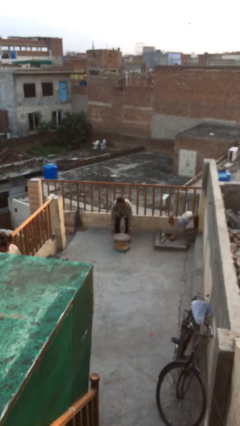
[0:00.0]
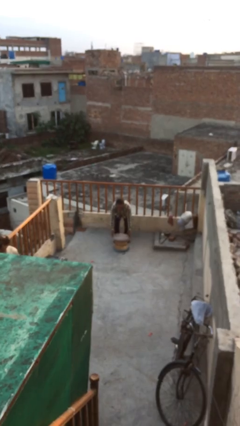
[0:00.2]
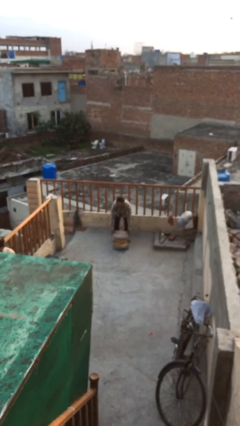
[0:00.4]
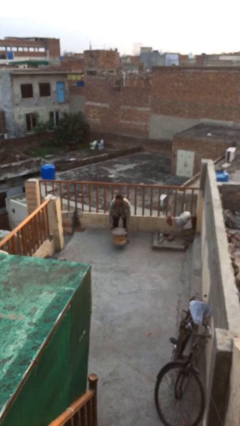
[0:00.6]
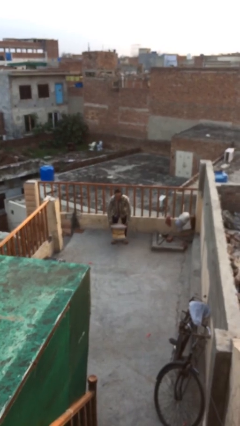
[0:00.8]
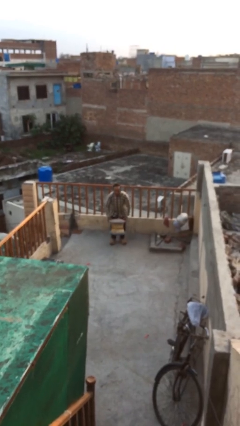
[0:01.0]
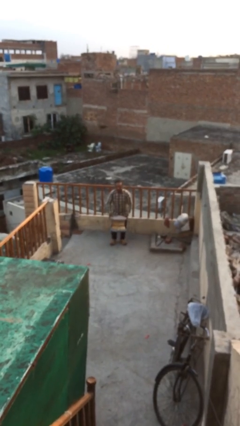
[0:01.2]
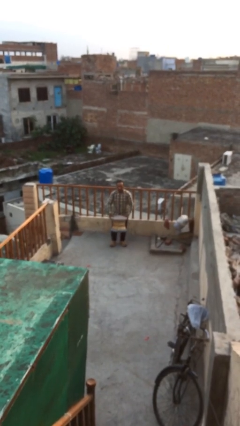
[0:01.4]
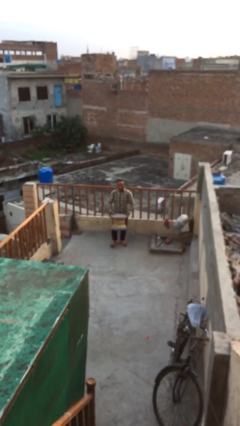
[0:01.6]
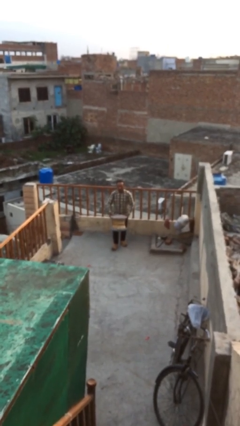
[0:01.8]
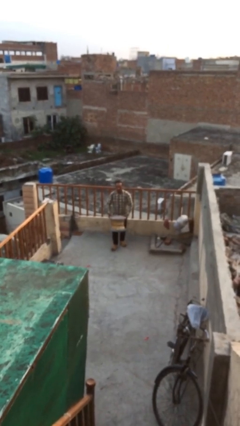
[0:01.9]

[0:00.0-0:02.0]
person picks up object from floor

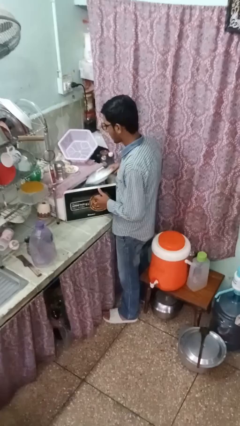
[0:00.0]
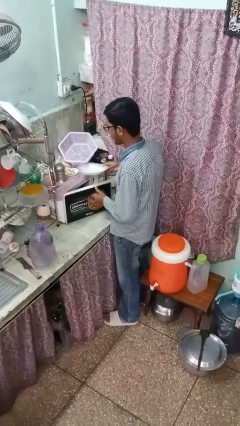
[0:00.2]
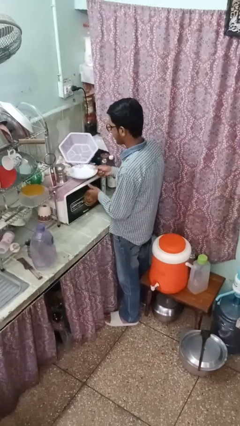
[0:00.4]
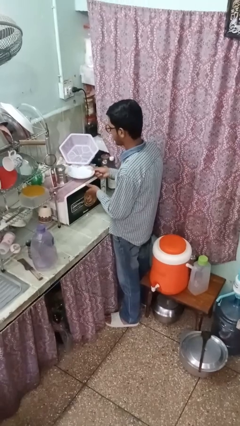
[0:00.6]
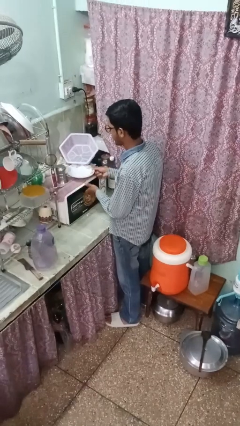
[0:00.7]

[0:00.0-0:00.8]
person takes object from oven

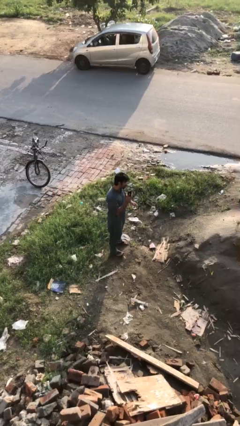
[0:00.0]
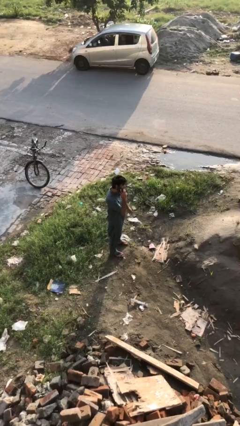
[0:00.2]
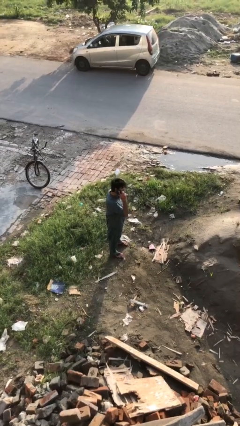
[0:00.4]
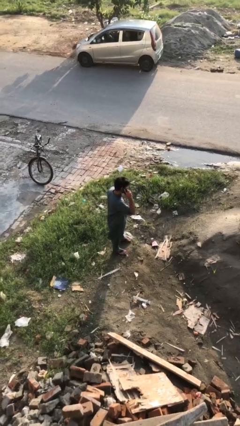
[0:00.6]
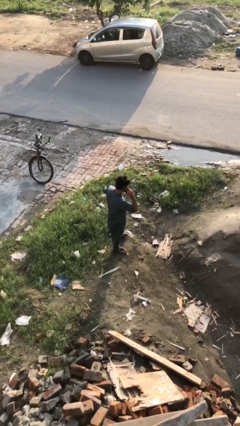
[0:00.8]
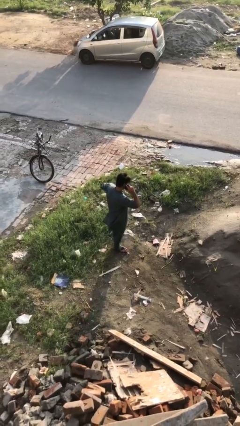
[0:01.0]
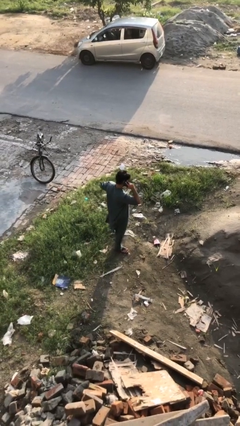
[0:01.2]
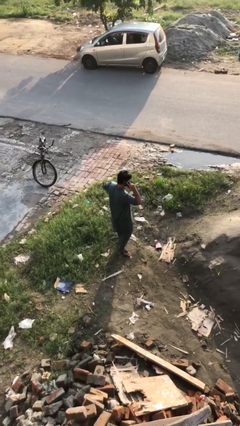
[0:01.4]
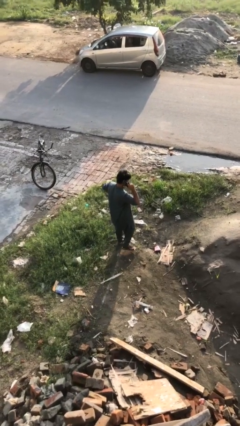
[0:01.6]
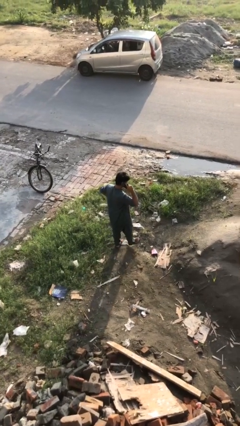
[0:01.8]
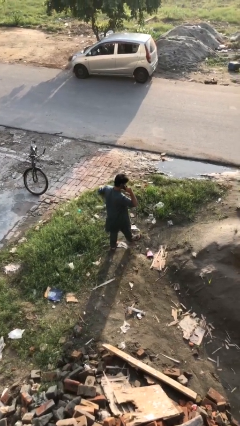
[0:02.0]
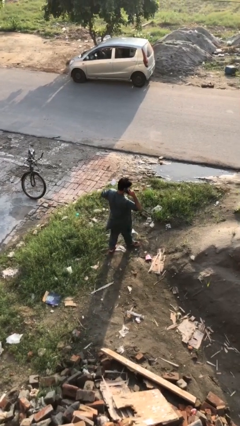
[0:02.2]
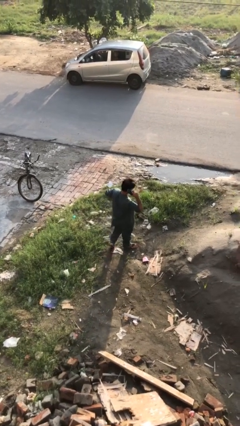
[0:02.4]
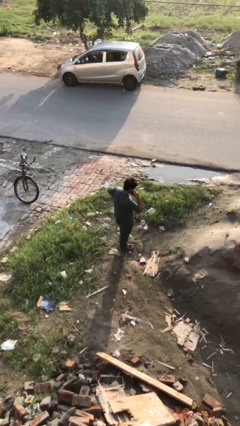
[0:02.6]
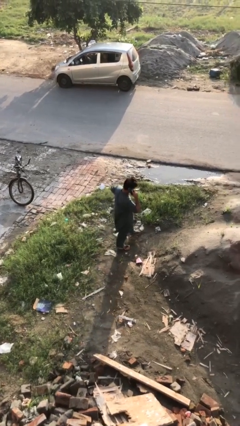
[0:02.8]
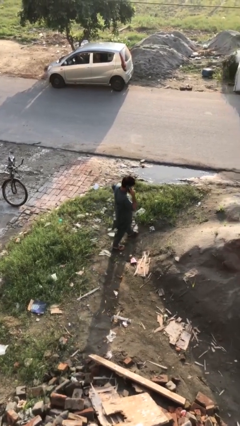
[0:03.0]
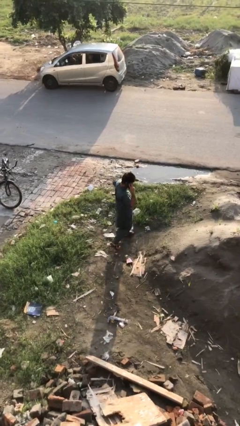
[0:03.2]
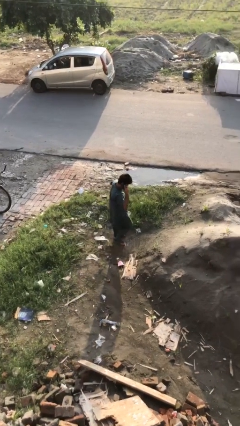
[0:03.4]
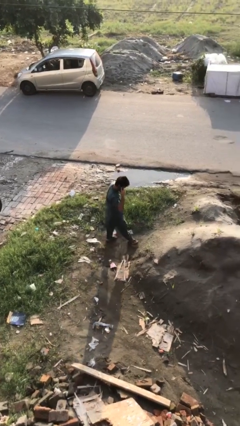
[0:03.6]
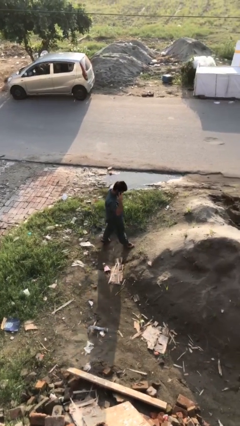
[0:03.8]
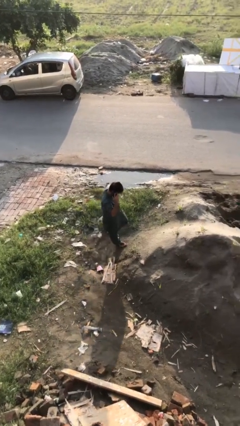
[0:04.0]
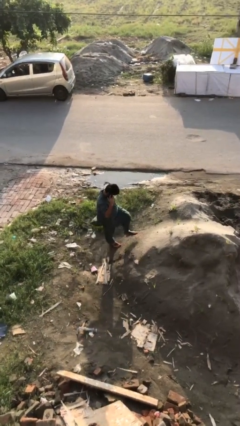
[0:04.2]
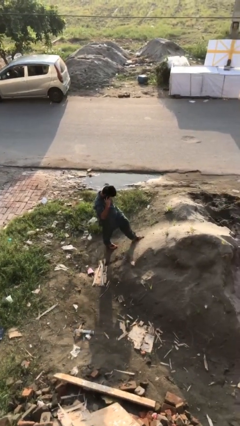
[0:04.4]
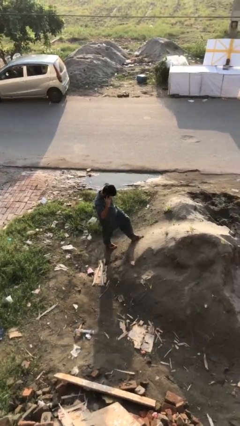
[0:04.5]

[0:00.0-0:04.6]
person talks on phone

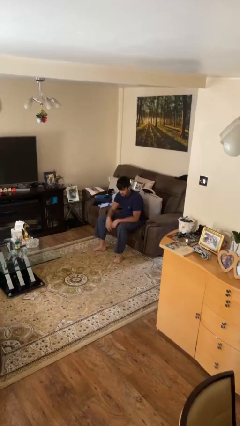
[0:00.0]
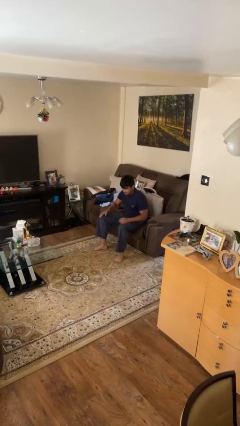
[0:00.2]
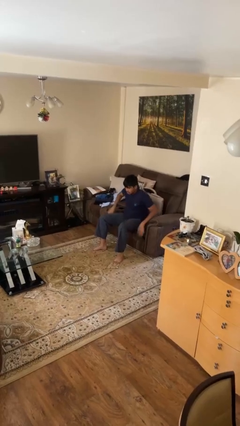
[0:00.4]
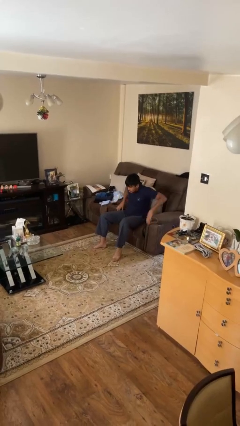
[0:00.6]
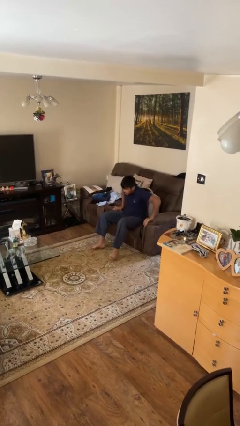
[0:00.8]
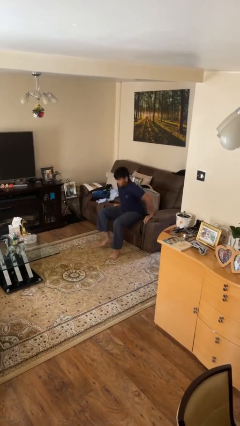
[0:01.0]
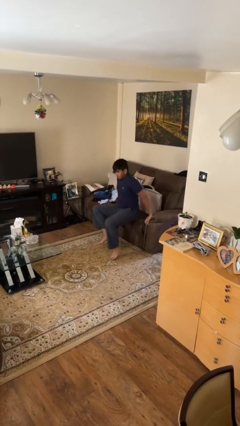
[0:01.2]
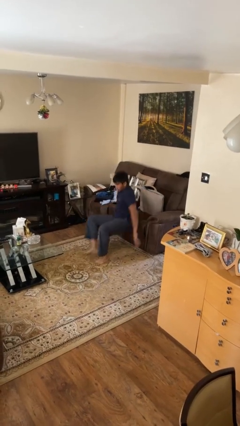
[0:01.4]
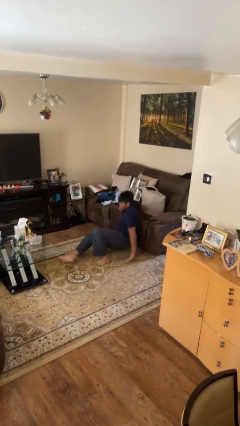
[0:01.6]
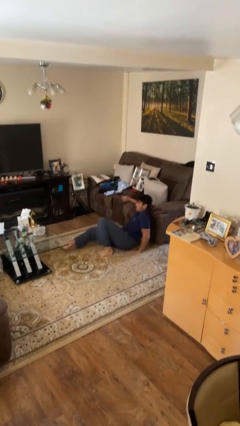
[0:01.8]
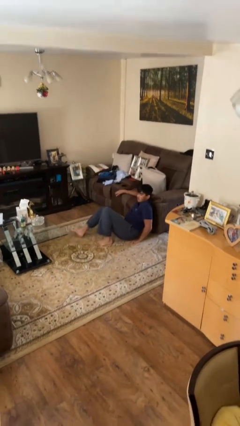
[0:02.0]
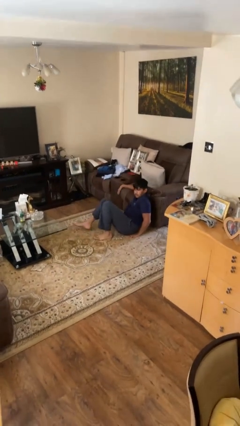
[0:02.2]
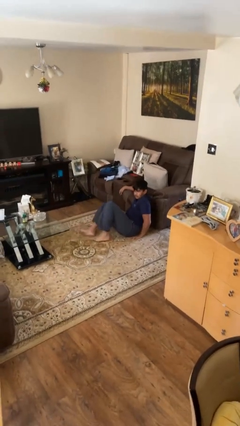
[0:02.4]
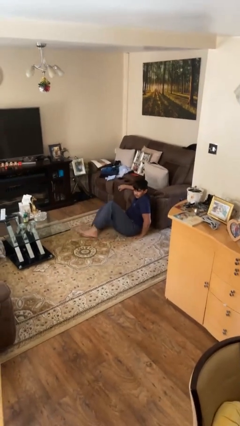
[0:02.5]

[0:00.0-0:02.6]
person falls from chair

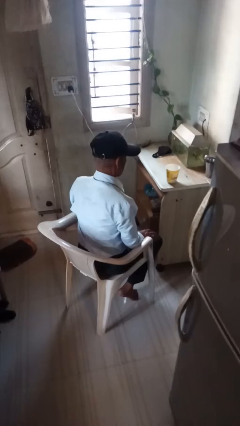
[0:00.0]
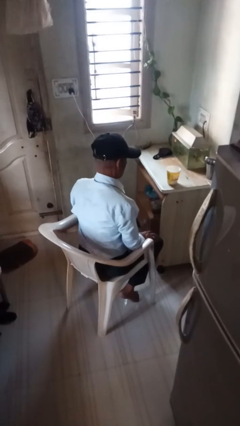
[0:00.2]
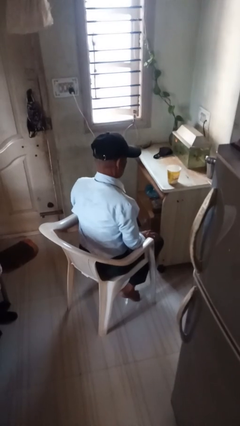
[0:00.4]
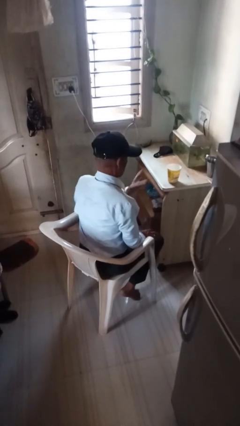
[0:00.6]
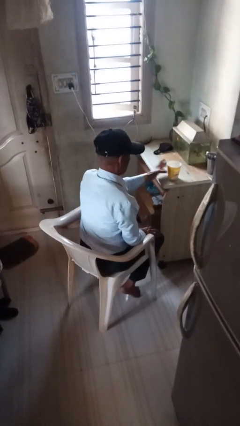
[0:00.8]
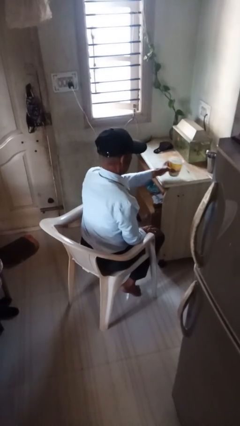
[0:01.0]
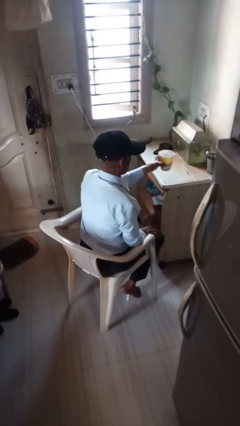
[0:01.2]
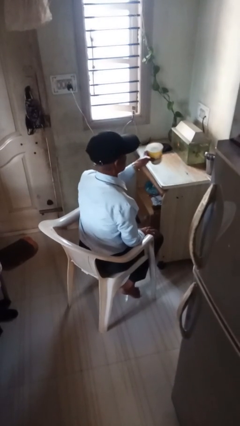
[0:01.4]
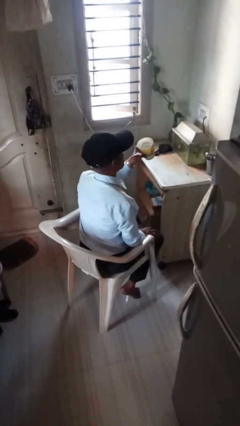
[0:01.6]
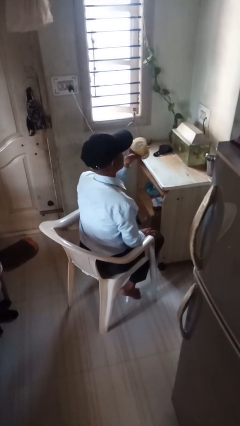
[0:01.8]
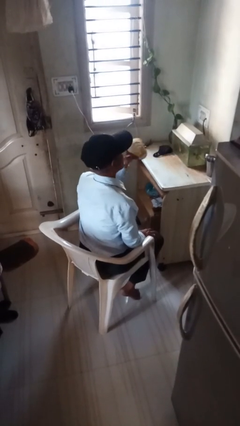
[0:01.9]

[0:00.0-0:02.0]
person picks up object from table

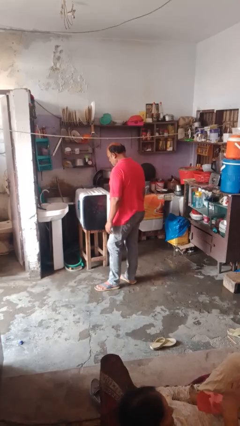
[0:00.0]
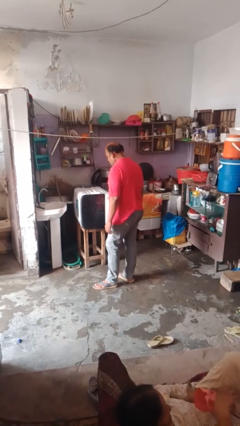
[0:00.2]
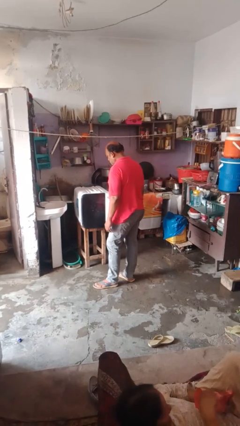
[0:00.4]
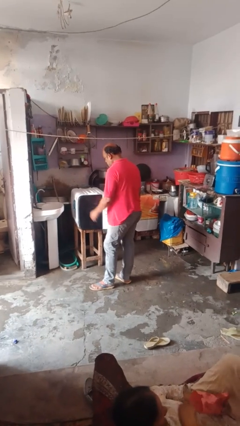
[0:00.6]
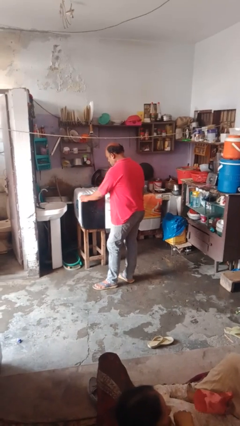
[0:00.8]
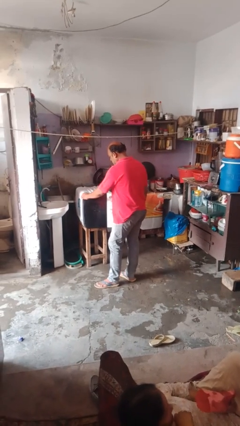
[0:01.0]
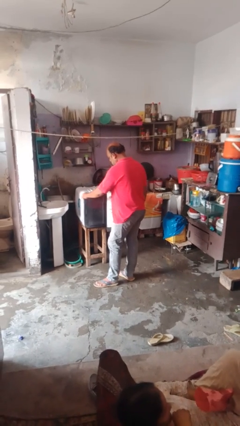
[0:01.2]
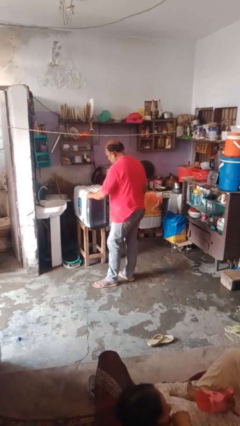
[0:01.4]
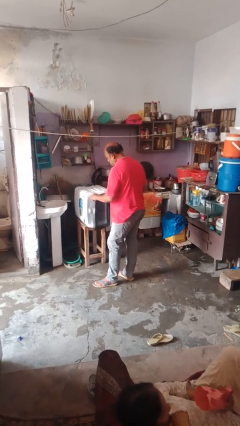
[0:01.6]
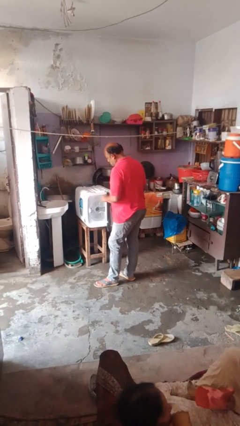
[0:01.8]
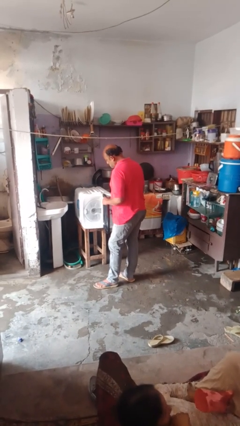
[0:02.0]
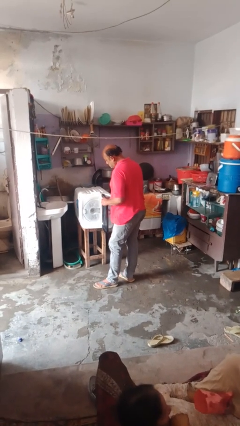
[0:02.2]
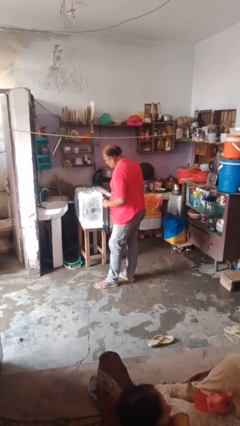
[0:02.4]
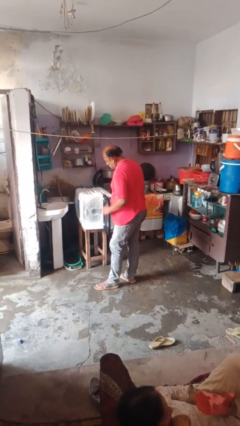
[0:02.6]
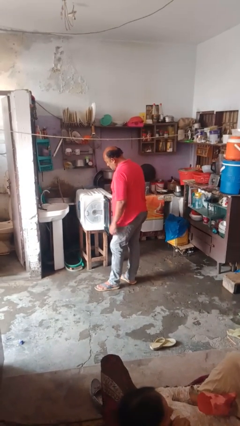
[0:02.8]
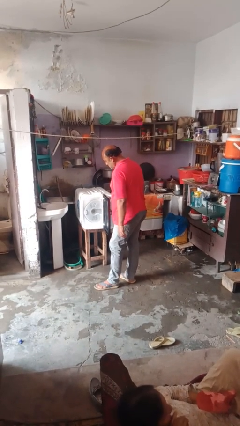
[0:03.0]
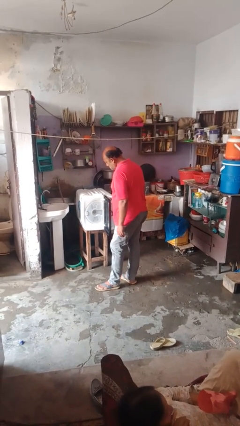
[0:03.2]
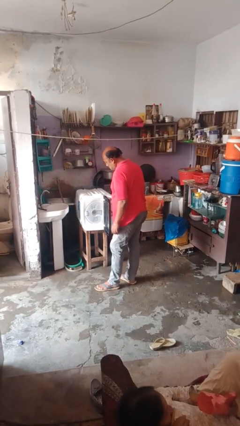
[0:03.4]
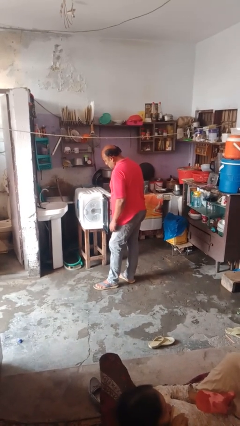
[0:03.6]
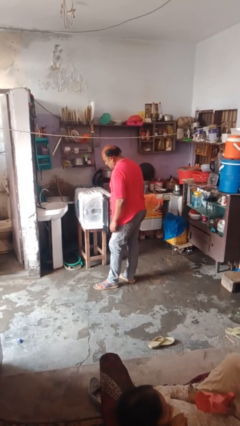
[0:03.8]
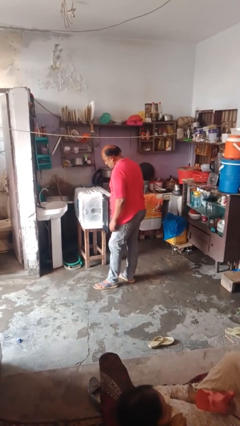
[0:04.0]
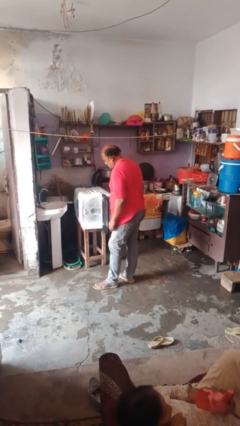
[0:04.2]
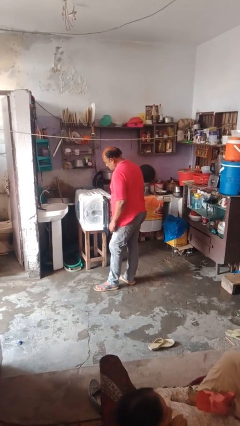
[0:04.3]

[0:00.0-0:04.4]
person opens dishwasher

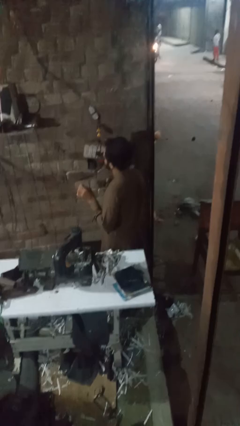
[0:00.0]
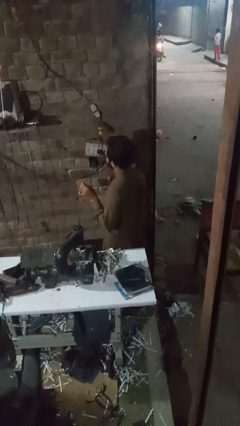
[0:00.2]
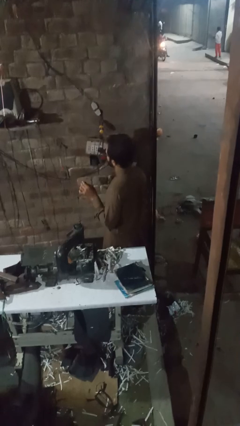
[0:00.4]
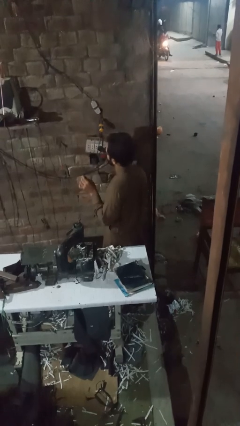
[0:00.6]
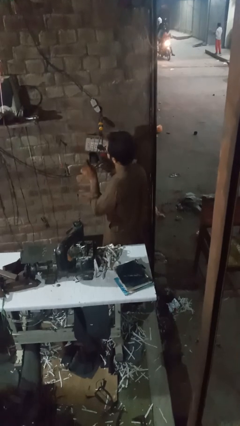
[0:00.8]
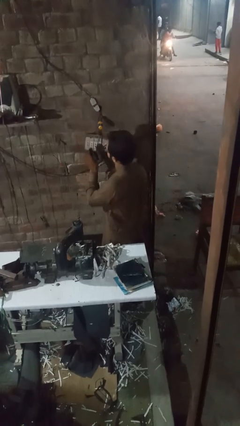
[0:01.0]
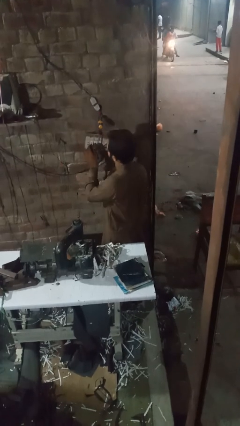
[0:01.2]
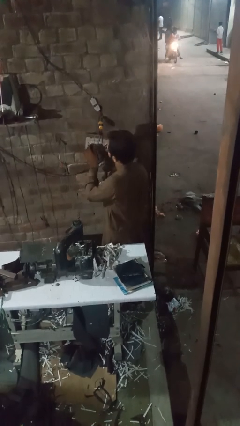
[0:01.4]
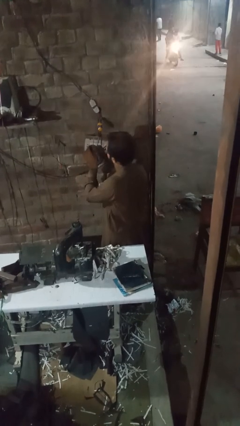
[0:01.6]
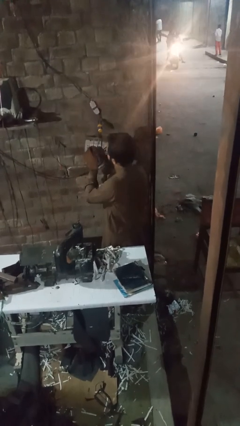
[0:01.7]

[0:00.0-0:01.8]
person plugs into electrical socket
